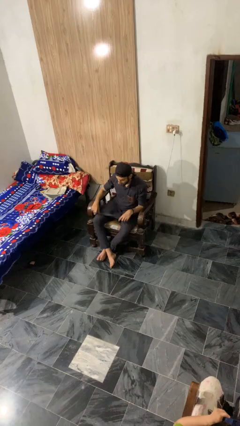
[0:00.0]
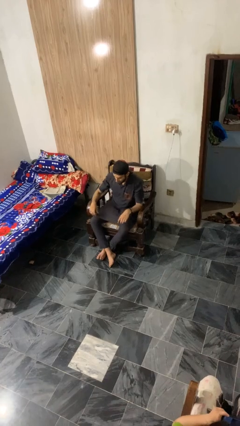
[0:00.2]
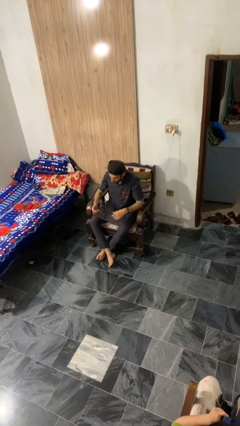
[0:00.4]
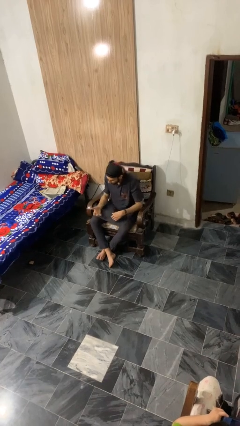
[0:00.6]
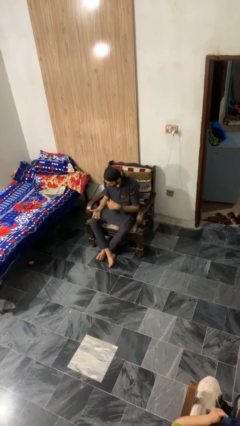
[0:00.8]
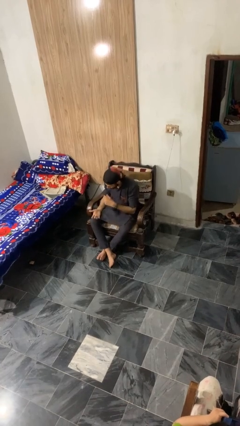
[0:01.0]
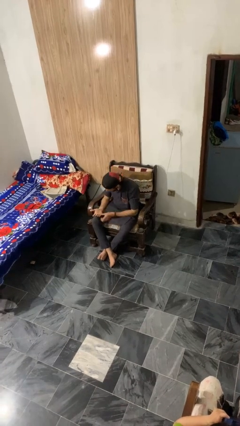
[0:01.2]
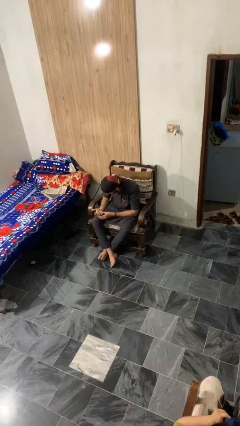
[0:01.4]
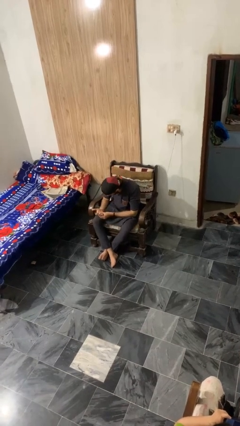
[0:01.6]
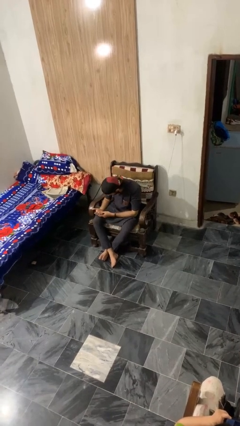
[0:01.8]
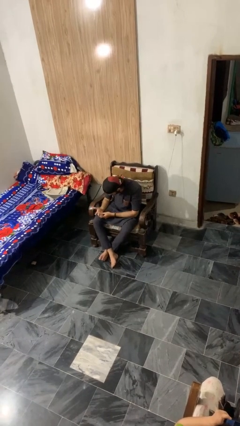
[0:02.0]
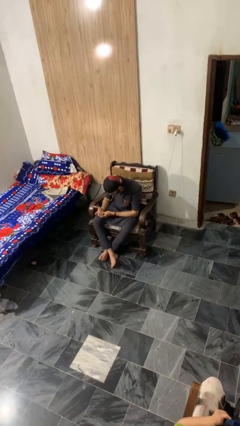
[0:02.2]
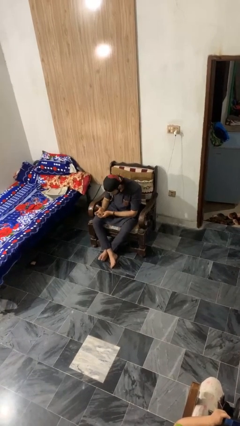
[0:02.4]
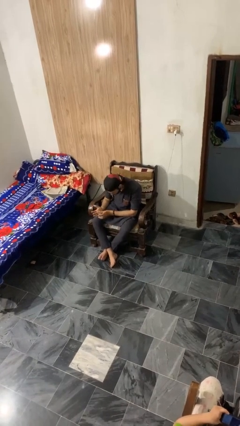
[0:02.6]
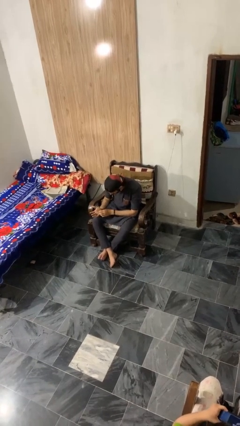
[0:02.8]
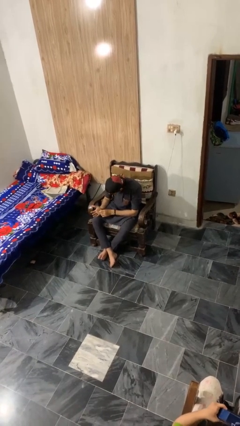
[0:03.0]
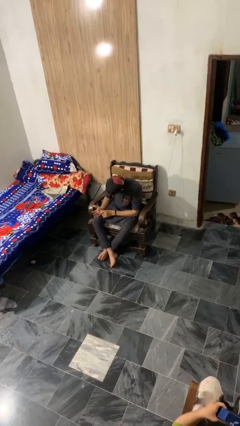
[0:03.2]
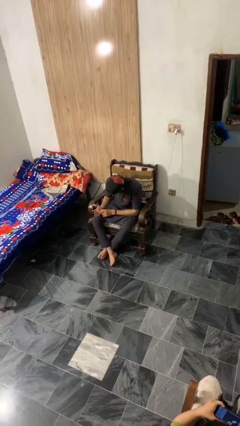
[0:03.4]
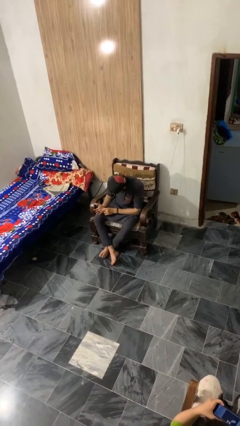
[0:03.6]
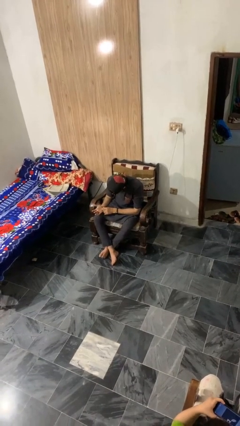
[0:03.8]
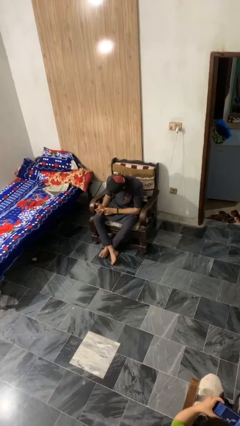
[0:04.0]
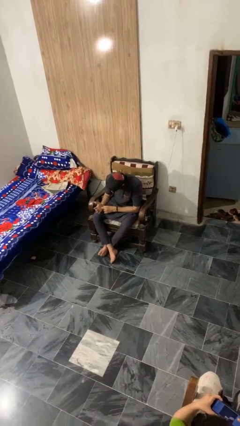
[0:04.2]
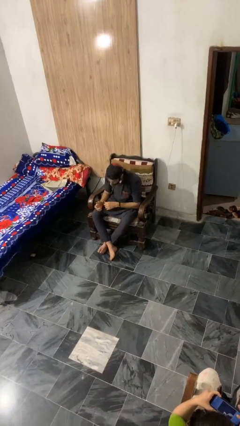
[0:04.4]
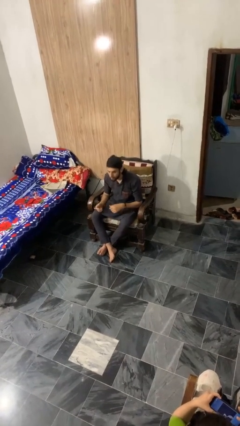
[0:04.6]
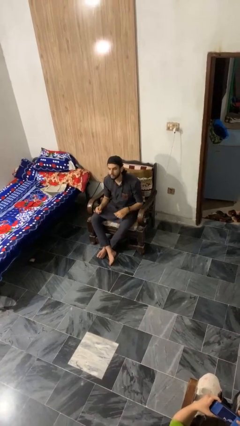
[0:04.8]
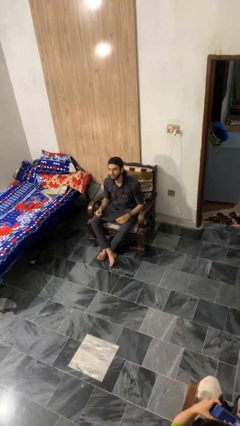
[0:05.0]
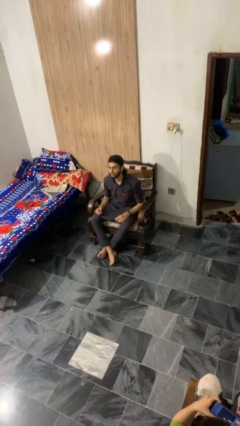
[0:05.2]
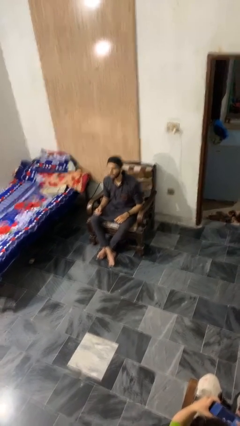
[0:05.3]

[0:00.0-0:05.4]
person looks at hands in lap

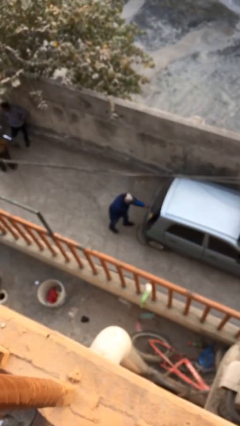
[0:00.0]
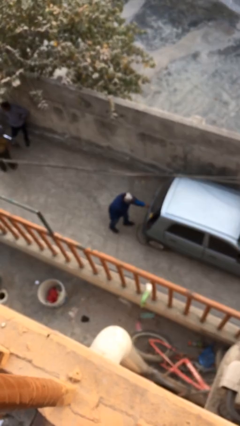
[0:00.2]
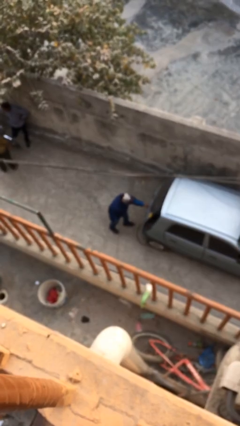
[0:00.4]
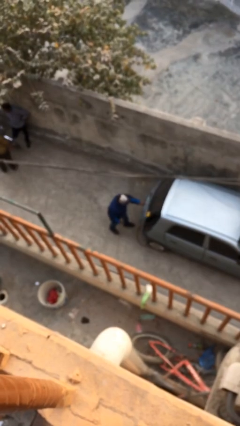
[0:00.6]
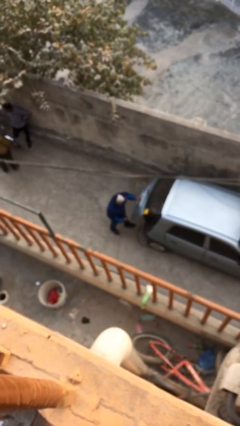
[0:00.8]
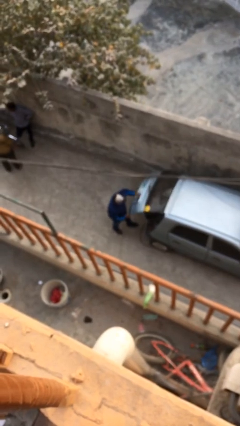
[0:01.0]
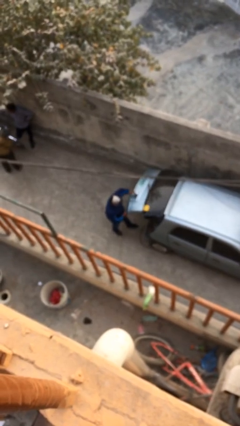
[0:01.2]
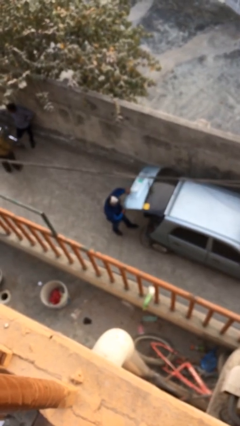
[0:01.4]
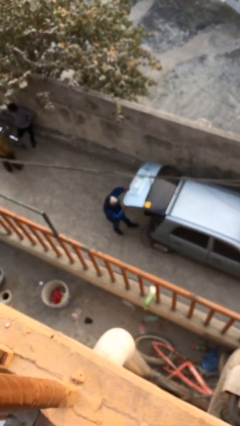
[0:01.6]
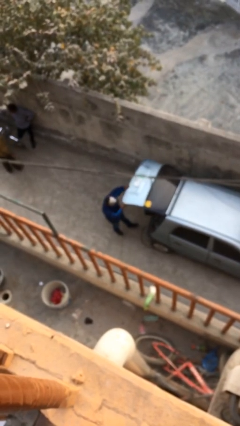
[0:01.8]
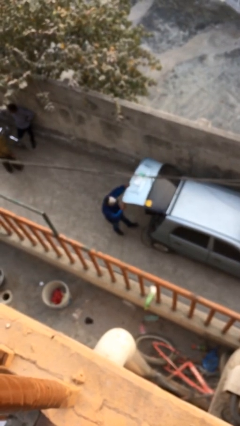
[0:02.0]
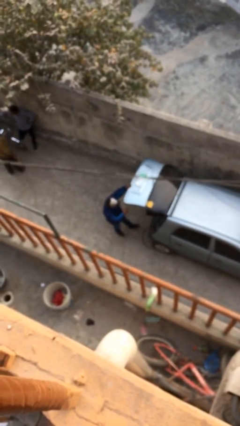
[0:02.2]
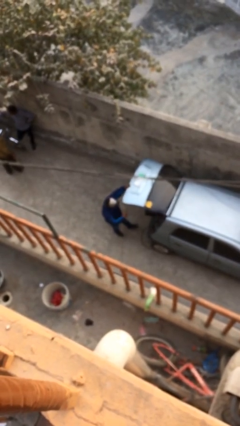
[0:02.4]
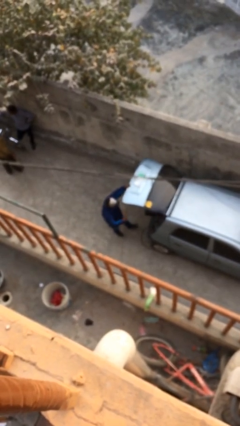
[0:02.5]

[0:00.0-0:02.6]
person opens car trunk

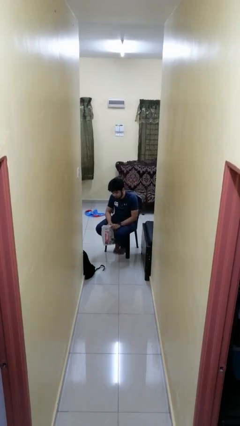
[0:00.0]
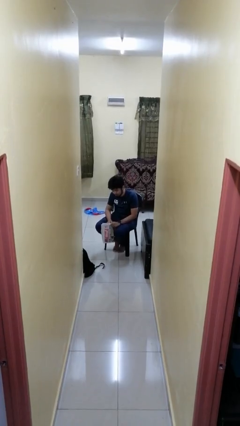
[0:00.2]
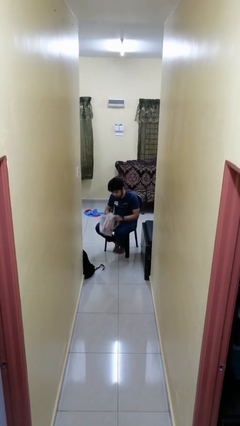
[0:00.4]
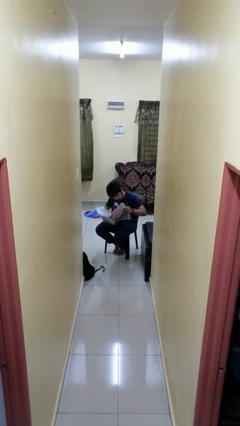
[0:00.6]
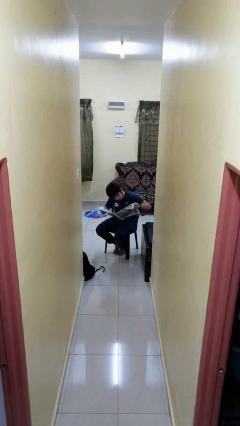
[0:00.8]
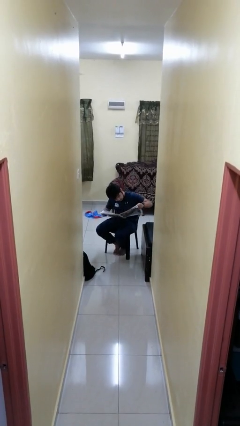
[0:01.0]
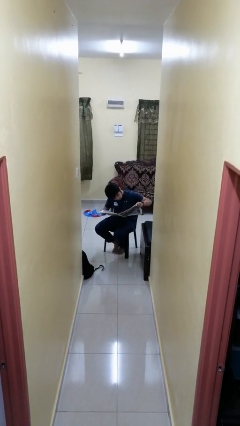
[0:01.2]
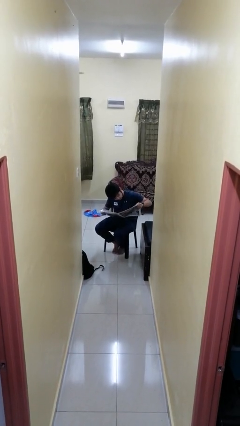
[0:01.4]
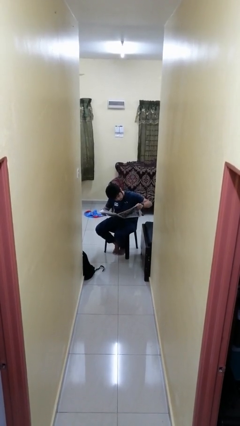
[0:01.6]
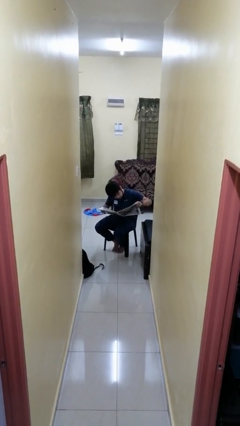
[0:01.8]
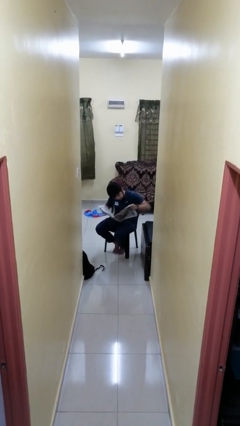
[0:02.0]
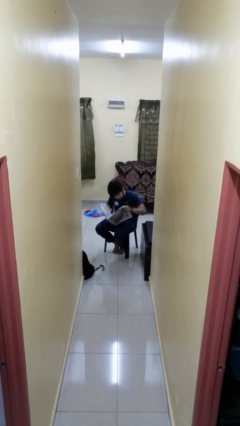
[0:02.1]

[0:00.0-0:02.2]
person reads newspaper

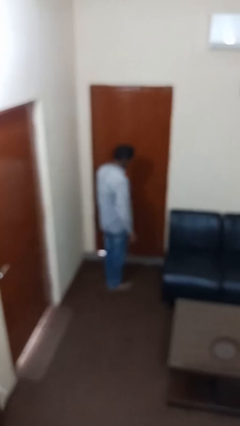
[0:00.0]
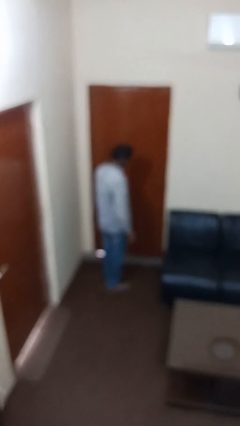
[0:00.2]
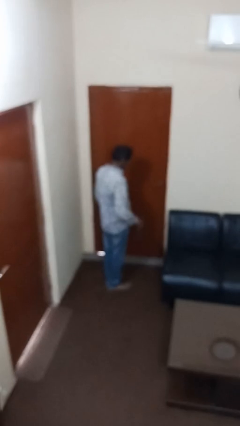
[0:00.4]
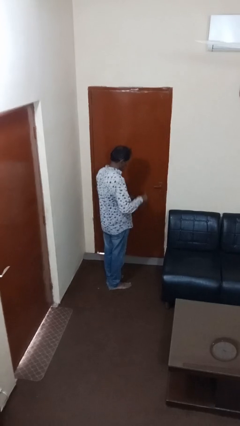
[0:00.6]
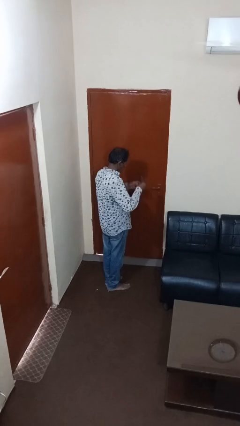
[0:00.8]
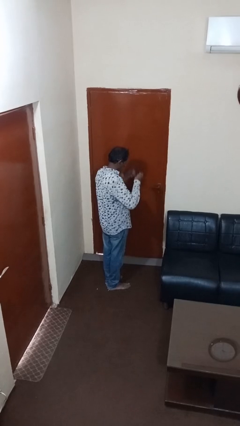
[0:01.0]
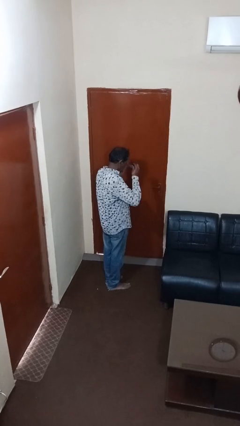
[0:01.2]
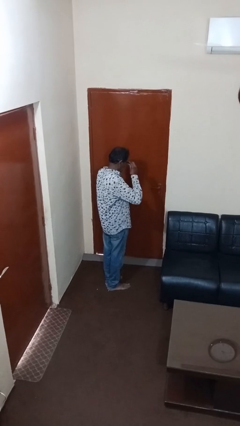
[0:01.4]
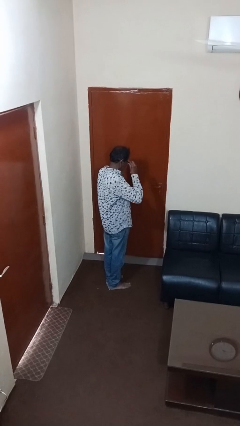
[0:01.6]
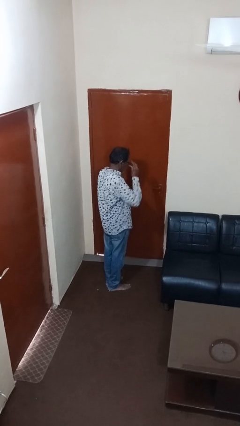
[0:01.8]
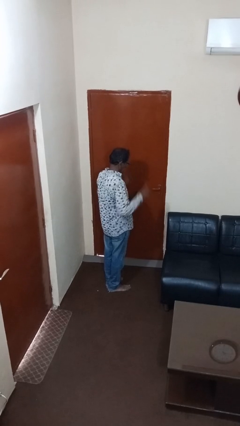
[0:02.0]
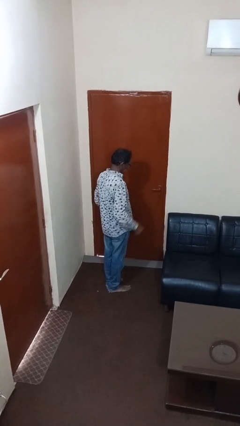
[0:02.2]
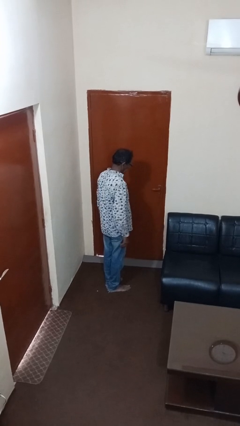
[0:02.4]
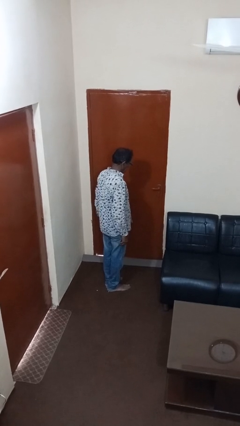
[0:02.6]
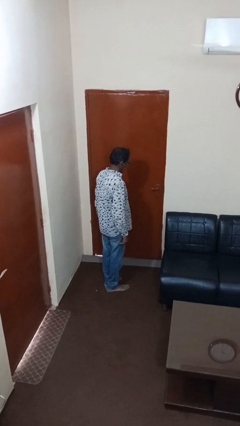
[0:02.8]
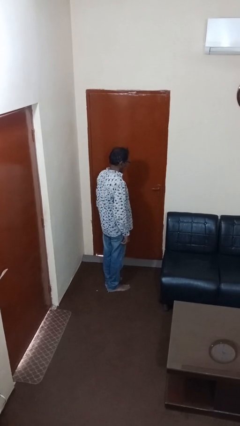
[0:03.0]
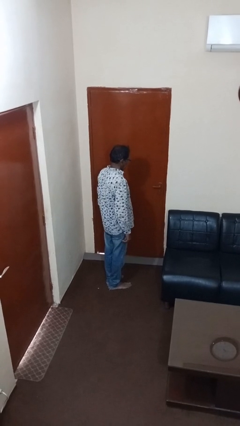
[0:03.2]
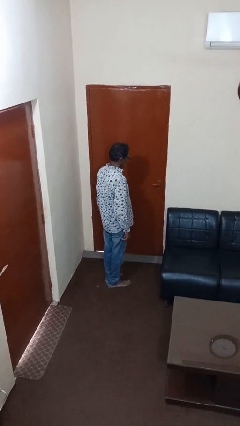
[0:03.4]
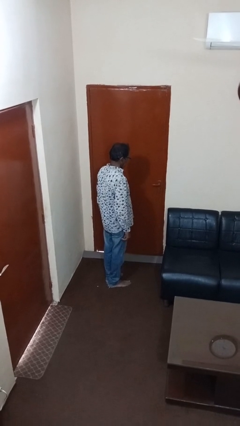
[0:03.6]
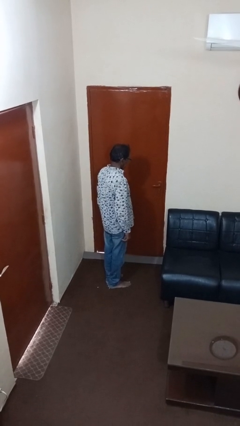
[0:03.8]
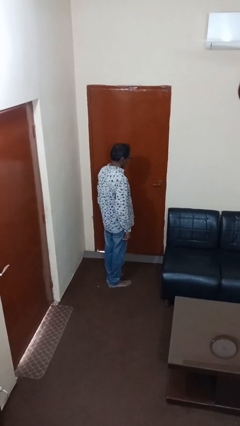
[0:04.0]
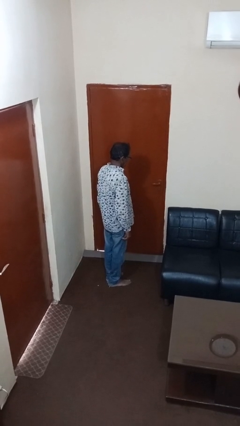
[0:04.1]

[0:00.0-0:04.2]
person puts on glasses

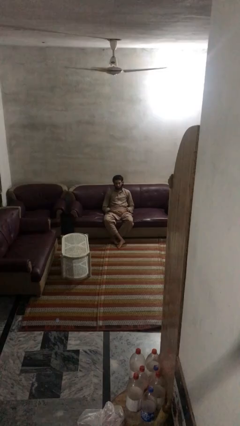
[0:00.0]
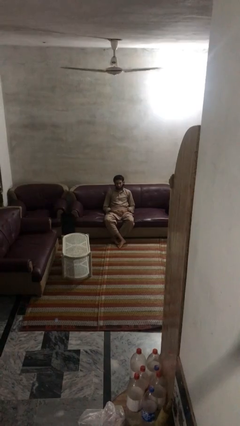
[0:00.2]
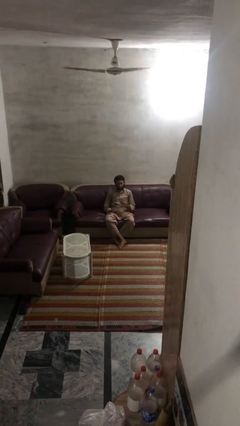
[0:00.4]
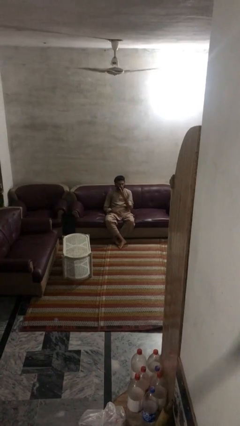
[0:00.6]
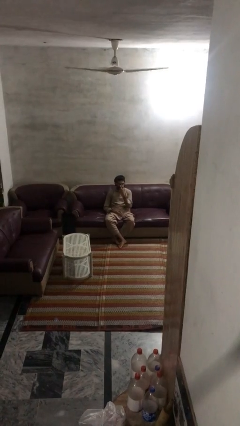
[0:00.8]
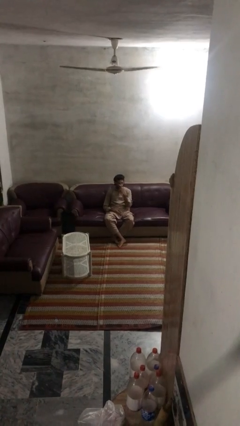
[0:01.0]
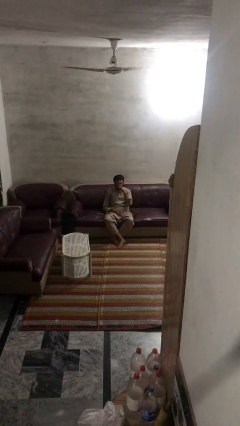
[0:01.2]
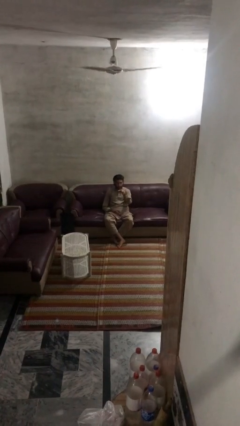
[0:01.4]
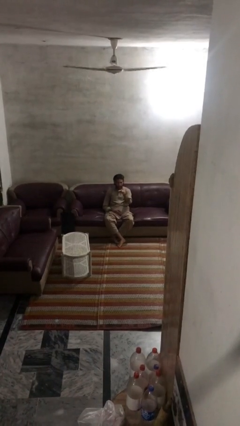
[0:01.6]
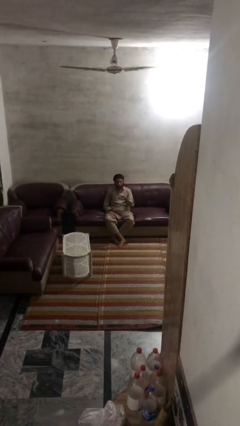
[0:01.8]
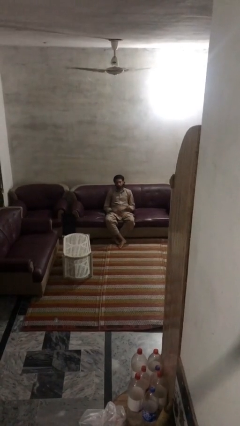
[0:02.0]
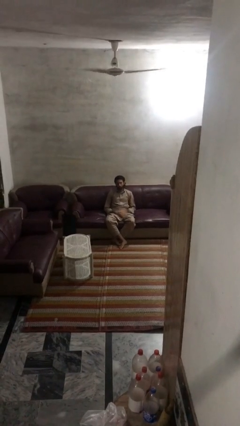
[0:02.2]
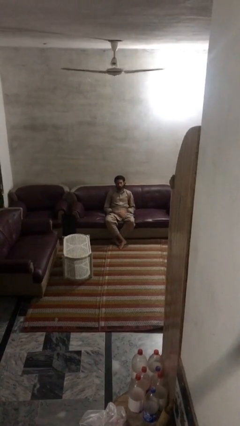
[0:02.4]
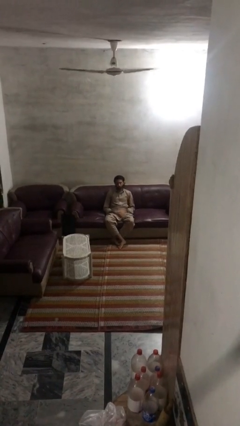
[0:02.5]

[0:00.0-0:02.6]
person gestures watch closely

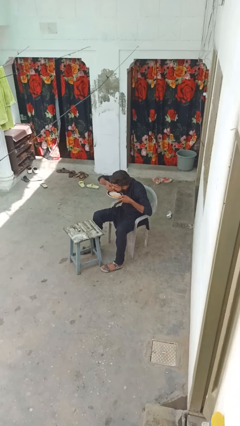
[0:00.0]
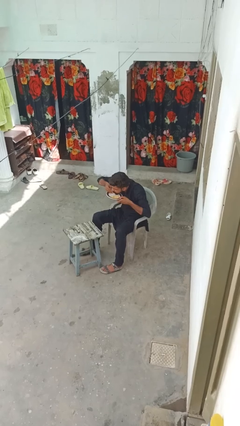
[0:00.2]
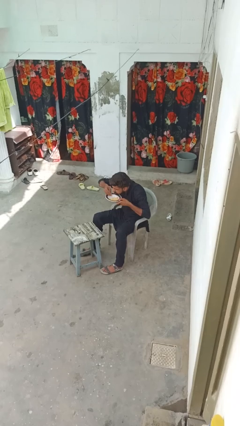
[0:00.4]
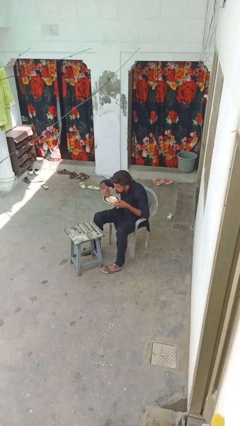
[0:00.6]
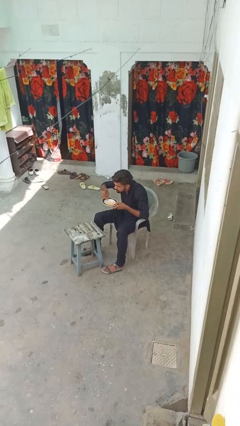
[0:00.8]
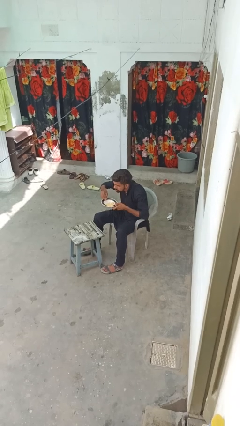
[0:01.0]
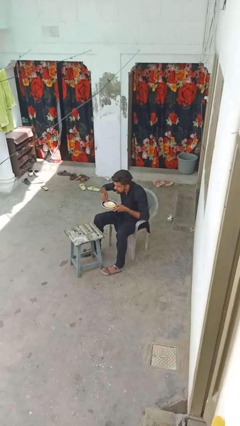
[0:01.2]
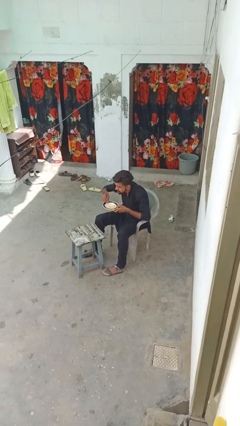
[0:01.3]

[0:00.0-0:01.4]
person eats with hands
